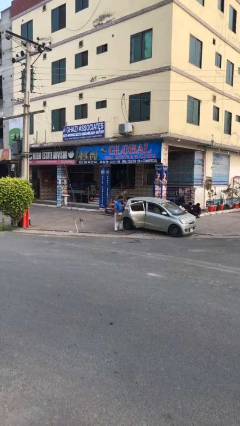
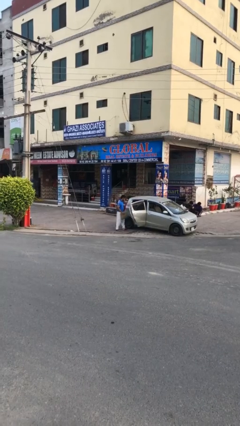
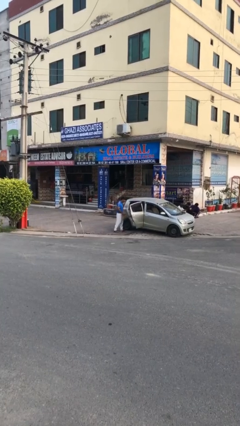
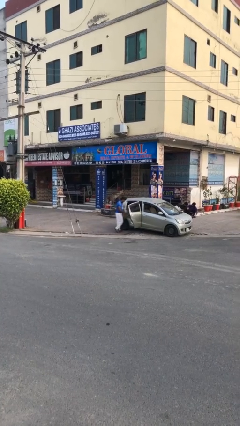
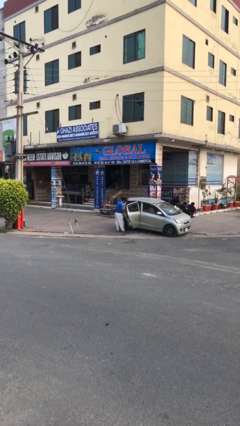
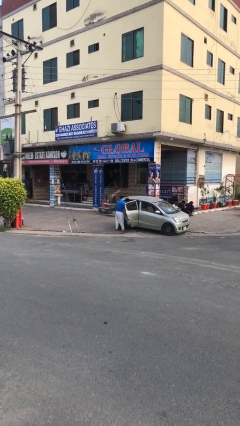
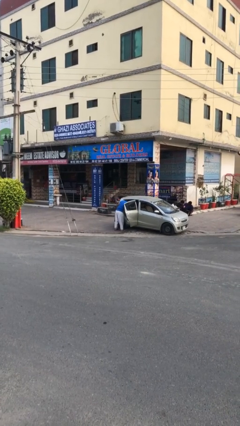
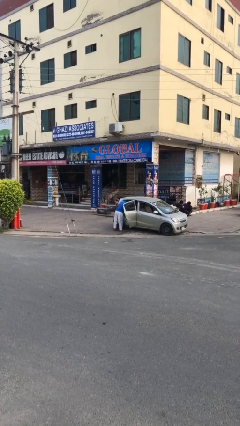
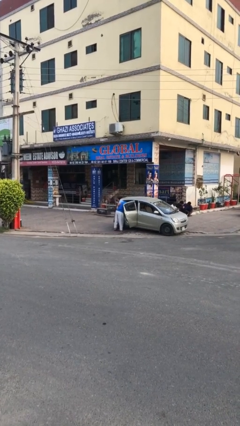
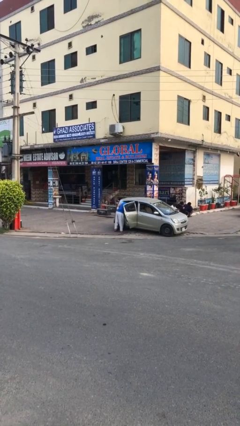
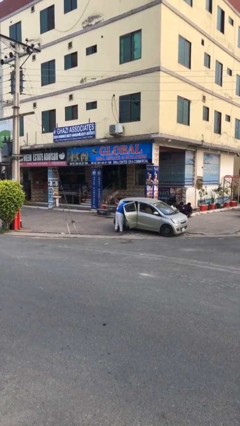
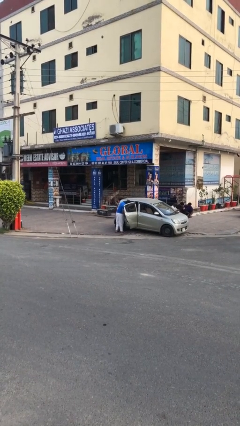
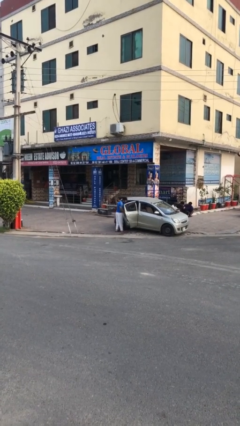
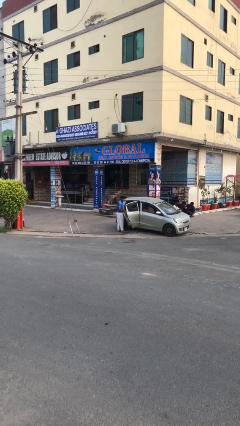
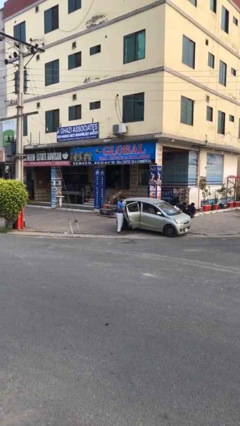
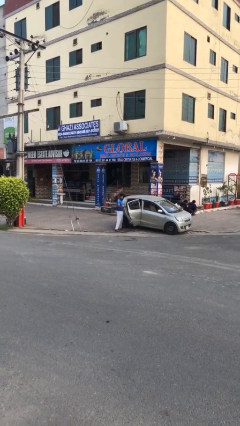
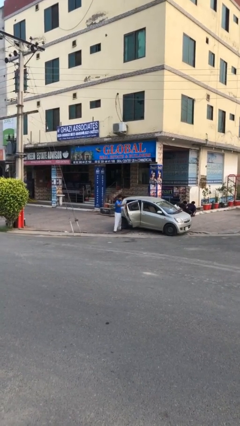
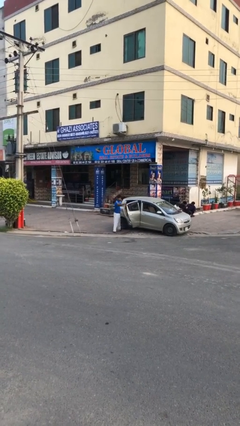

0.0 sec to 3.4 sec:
person loads car

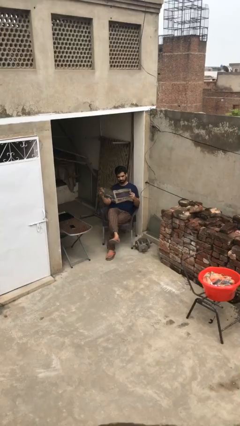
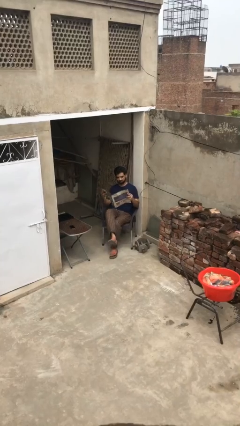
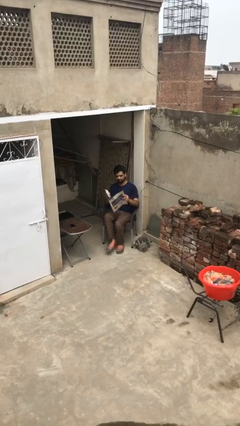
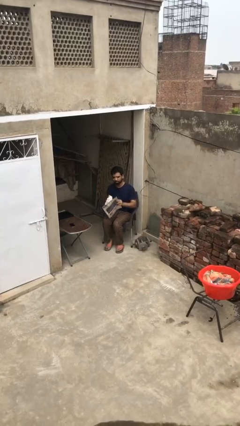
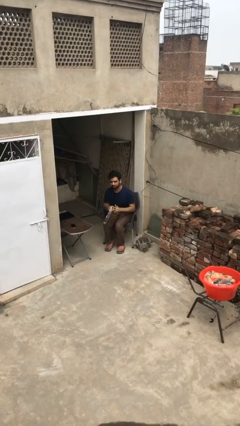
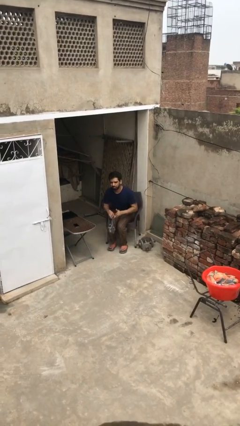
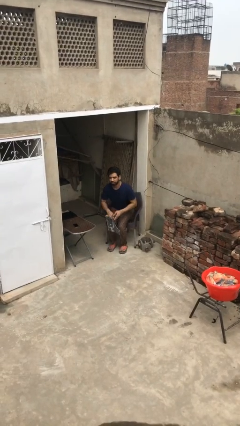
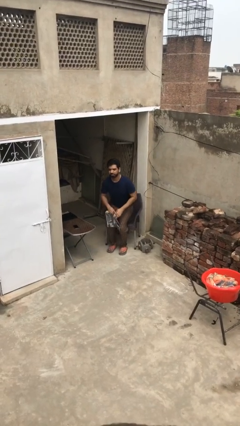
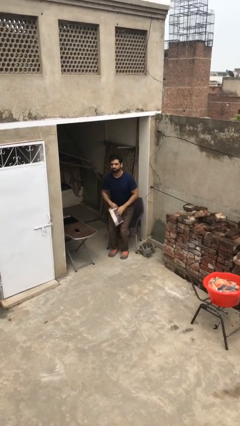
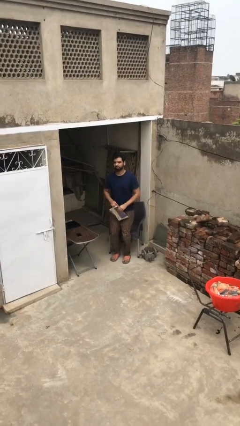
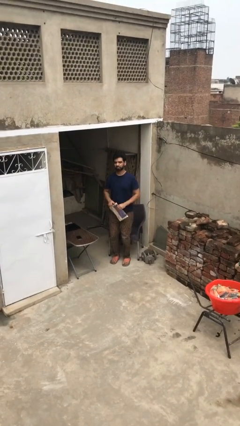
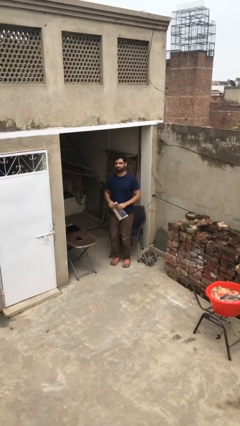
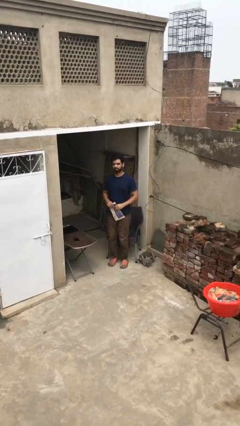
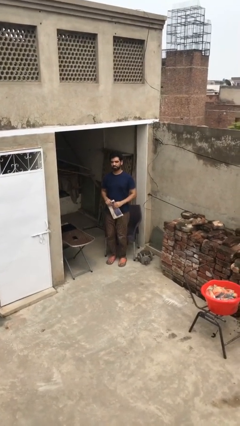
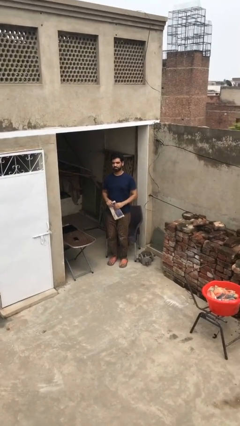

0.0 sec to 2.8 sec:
person stands up

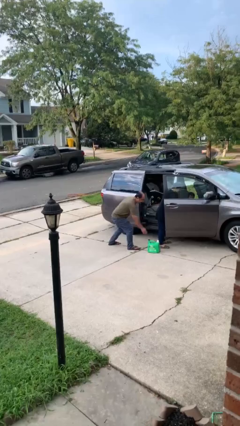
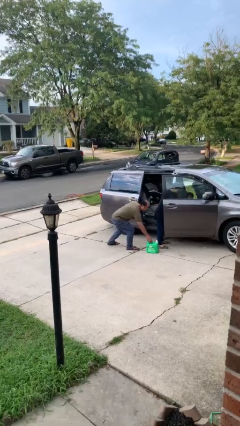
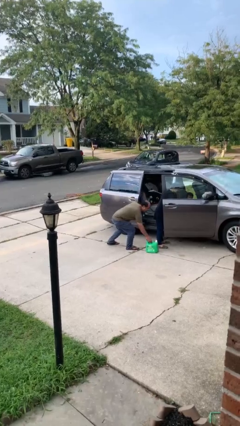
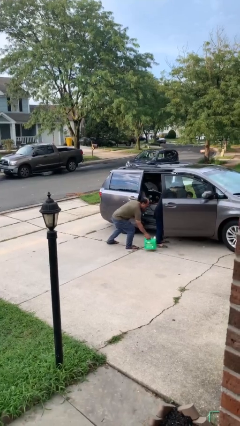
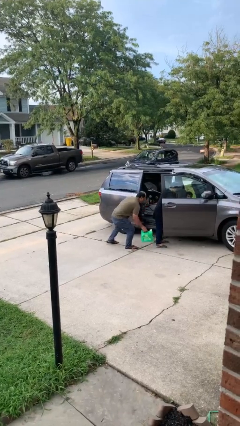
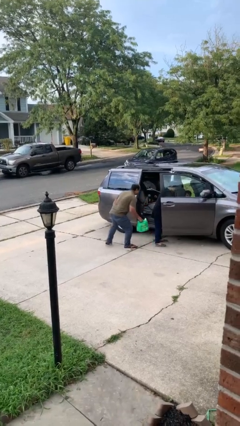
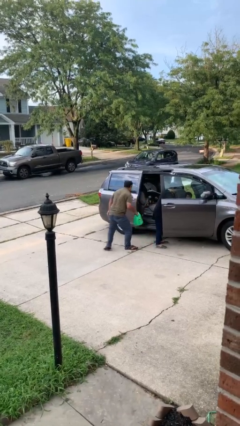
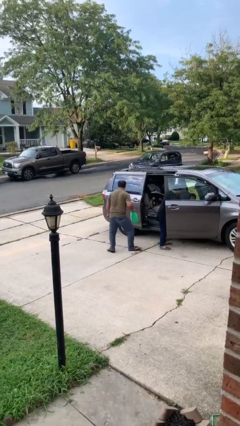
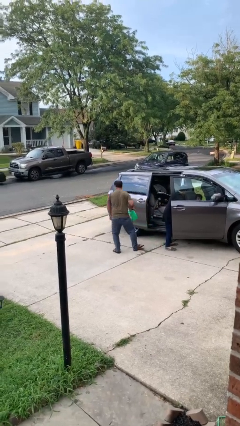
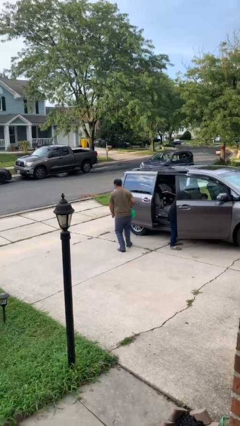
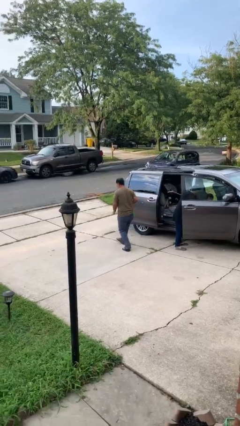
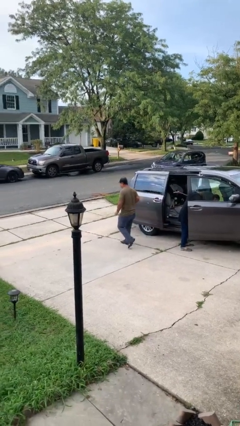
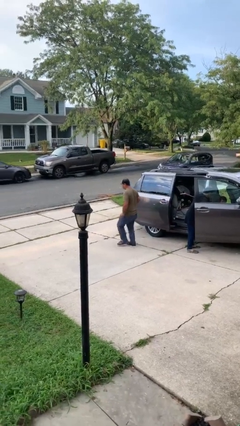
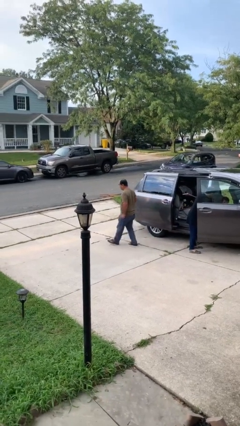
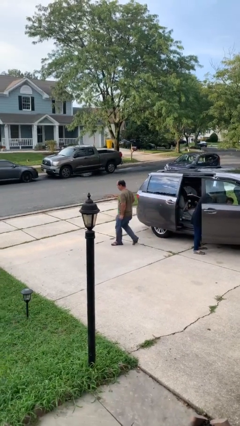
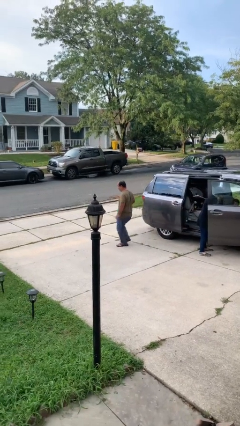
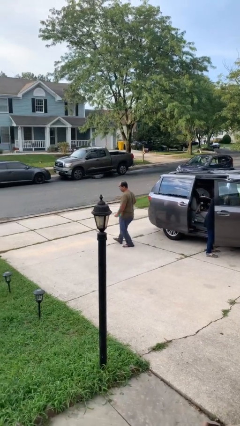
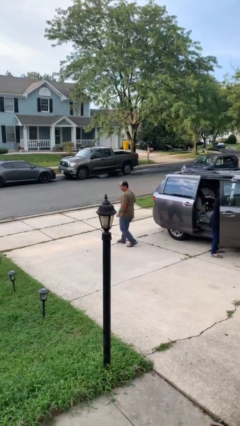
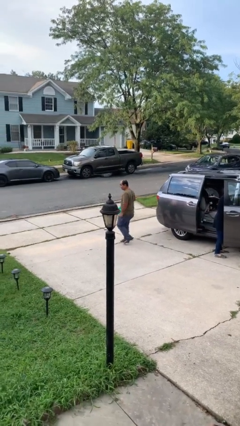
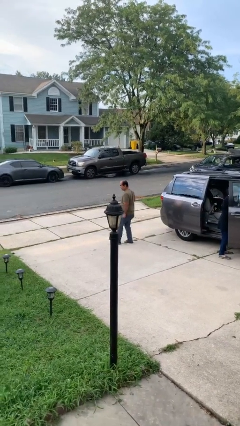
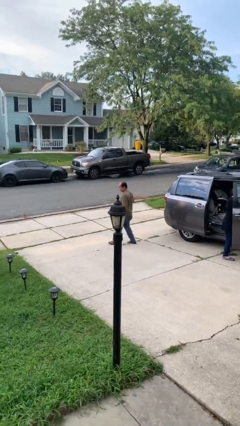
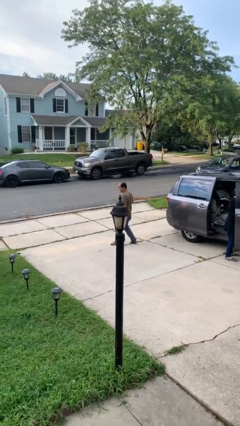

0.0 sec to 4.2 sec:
person steals object from person

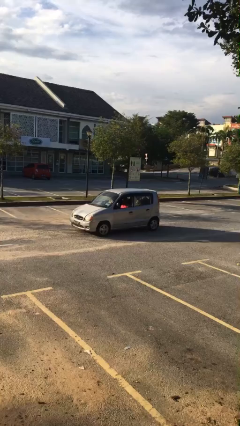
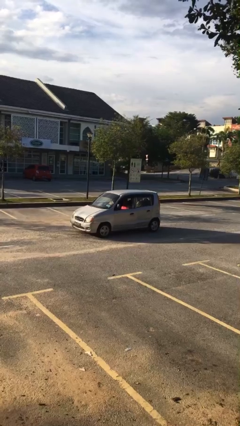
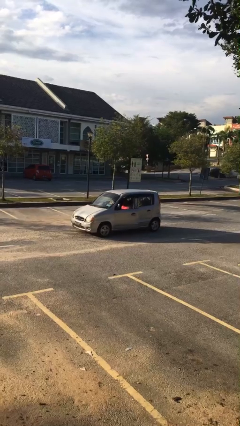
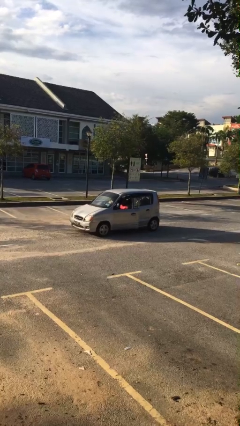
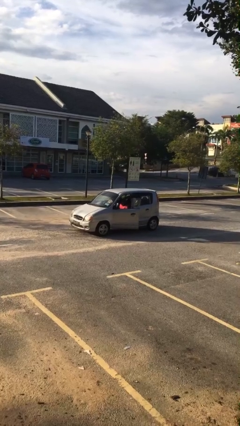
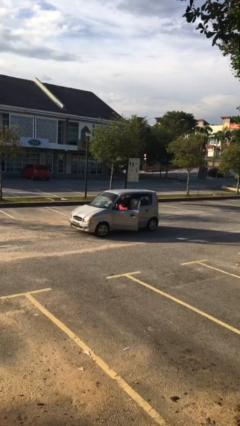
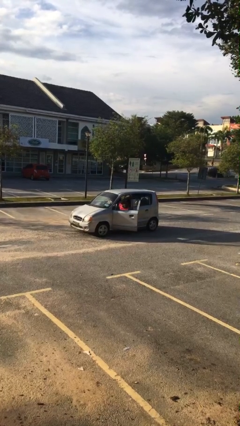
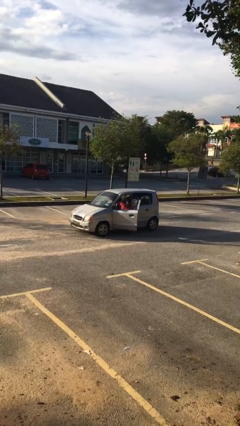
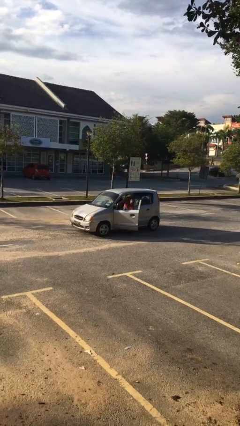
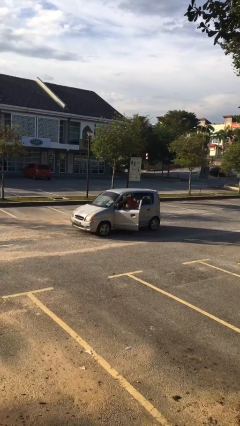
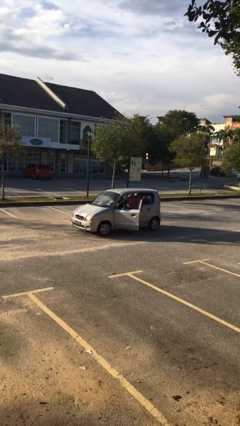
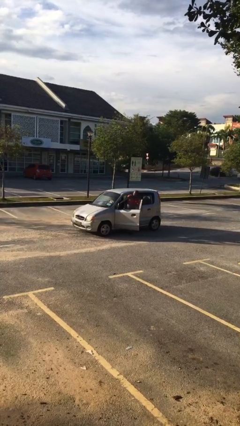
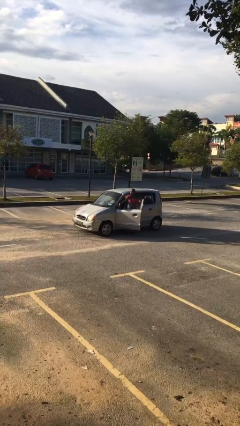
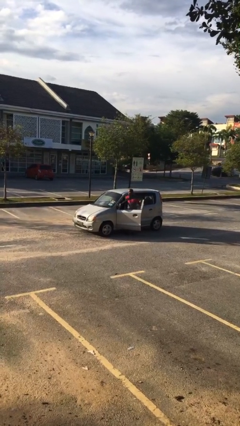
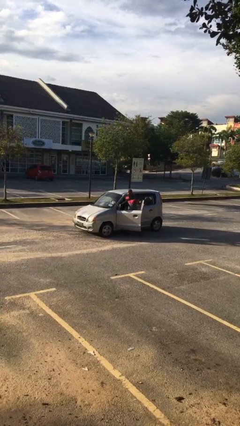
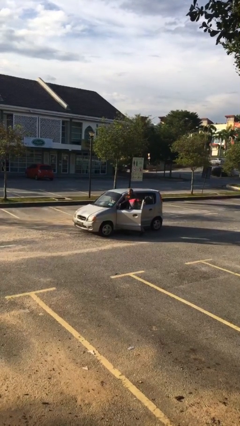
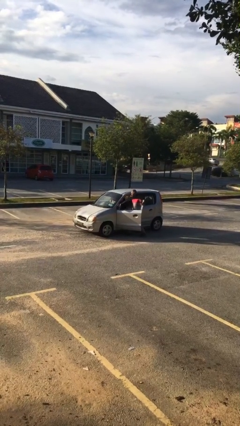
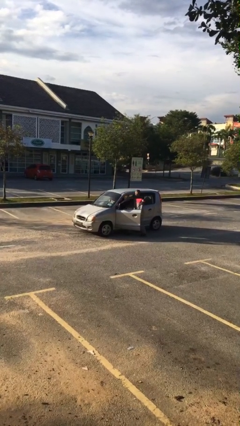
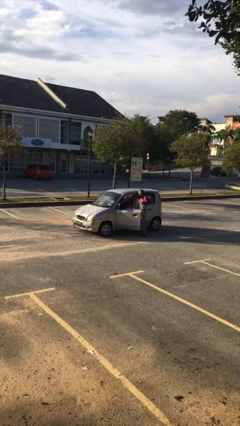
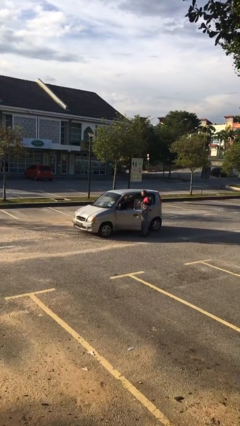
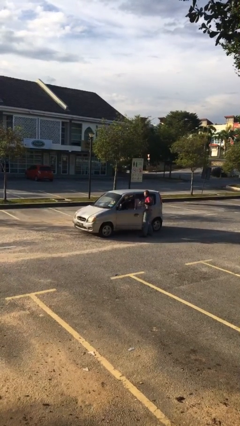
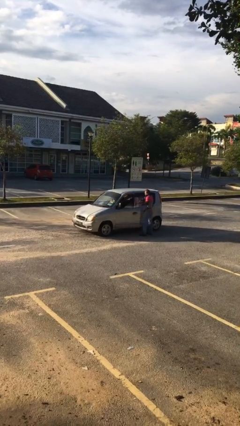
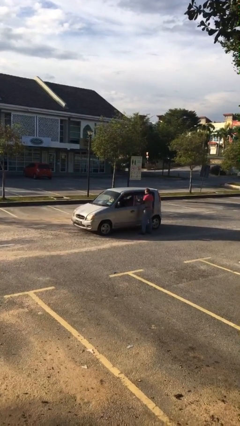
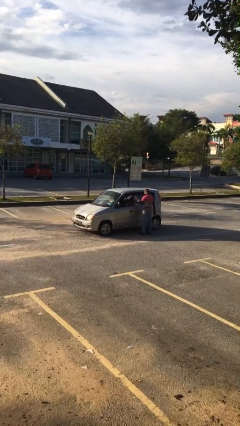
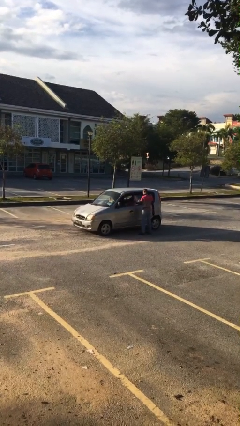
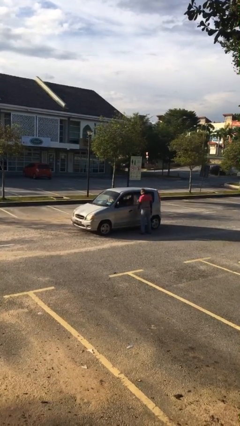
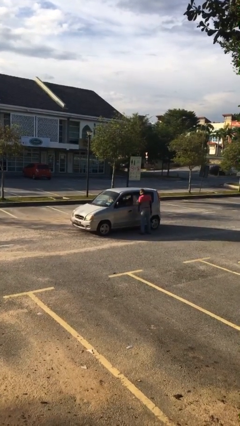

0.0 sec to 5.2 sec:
car drops off person

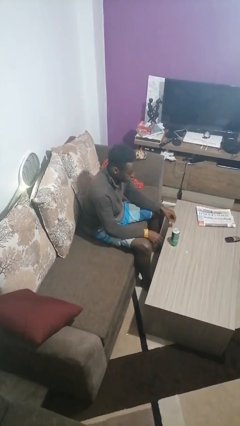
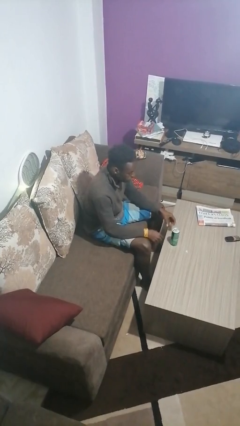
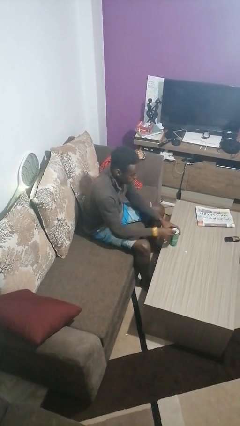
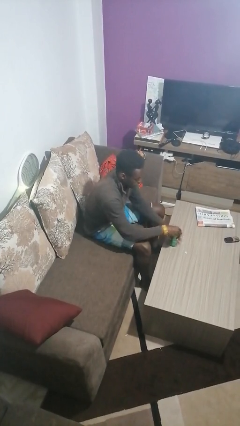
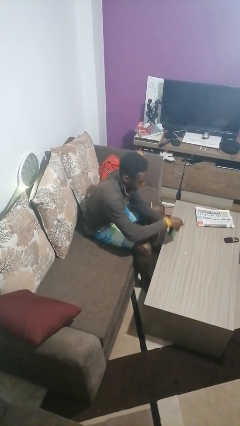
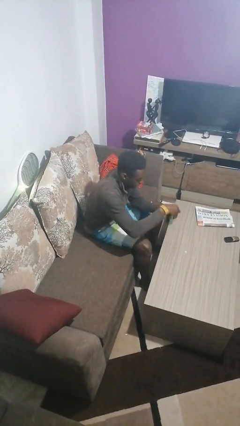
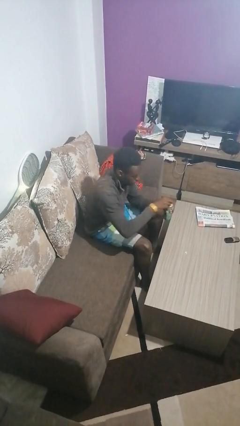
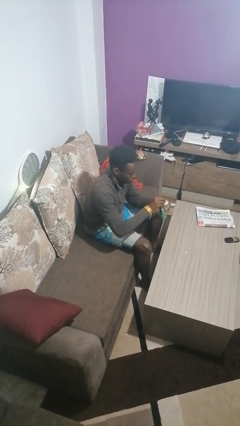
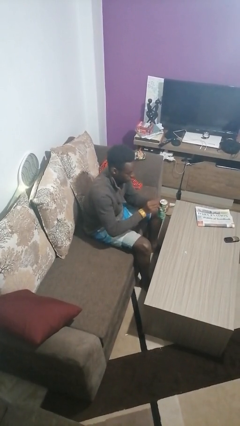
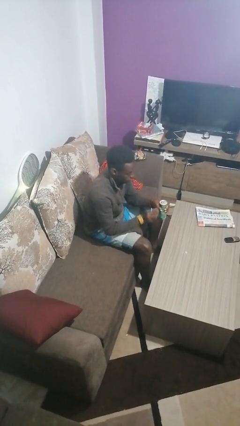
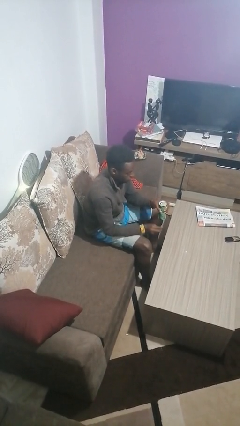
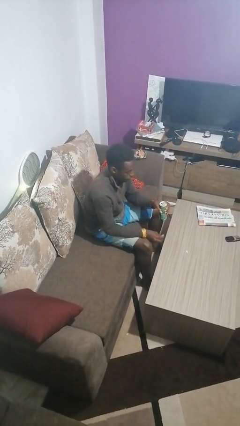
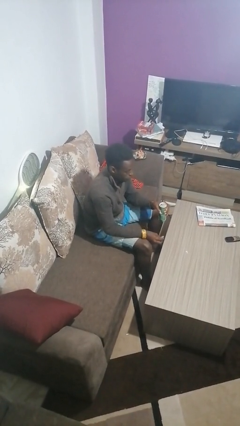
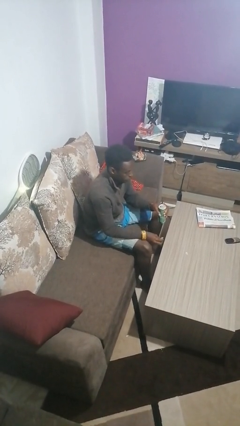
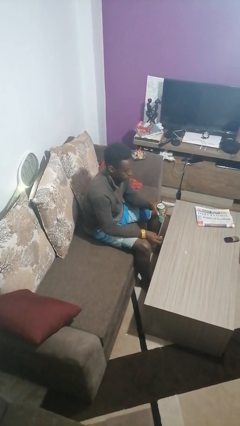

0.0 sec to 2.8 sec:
person opens beverage can
